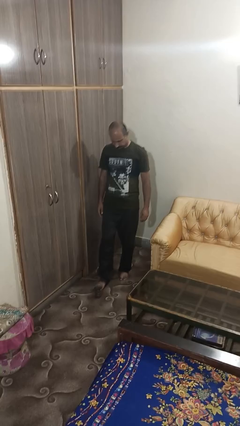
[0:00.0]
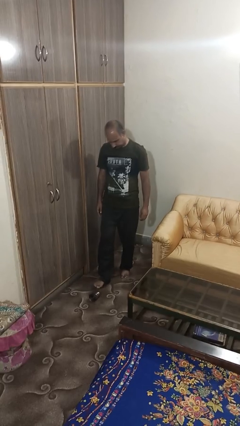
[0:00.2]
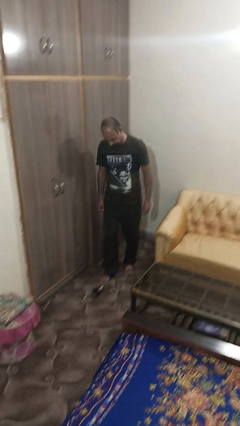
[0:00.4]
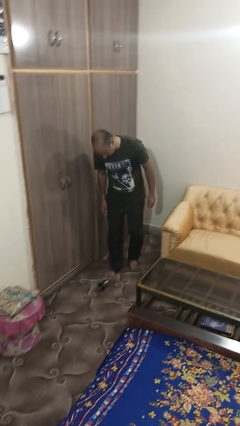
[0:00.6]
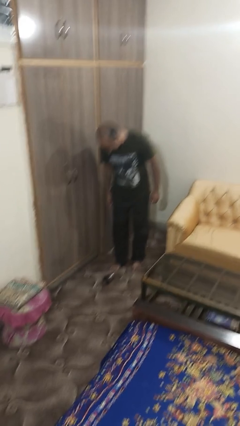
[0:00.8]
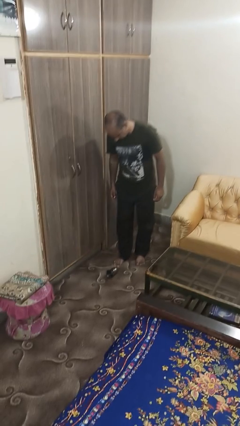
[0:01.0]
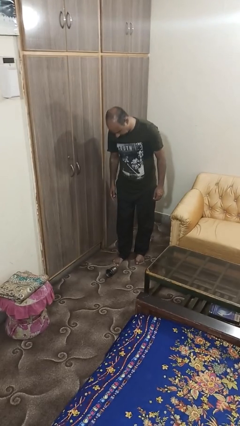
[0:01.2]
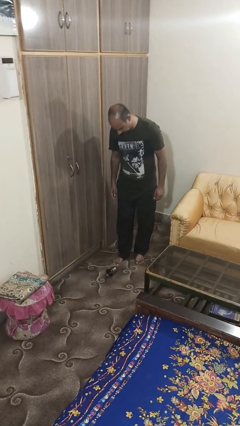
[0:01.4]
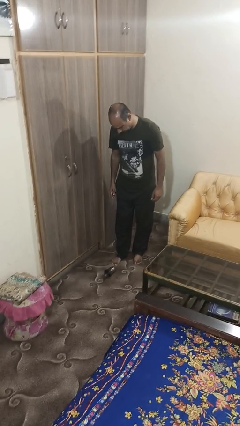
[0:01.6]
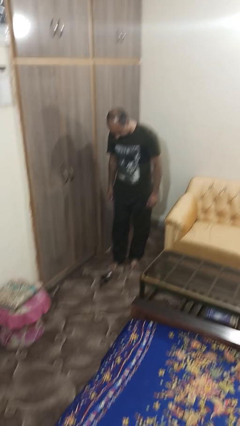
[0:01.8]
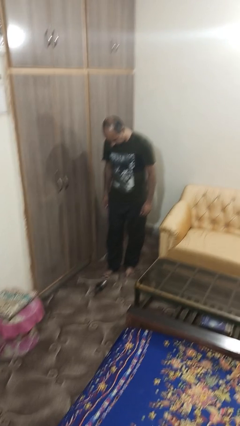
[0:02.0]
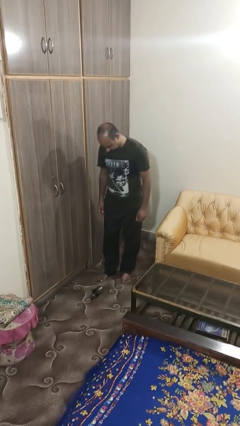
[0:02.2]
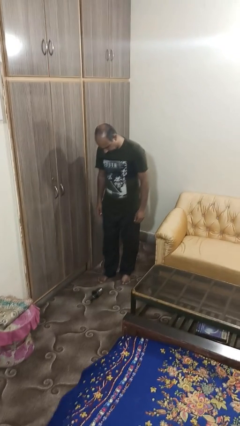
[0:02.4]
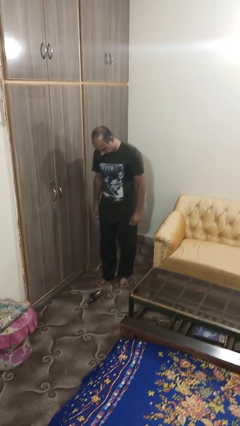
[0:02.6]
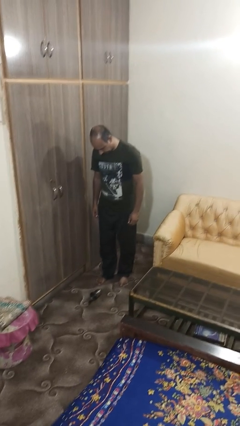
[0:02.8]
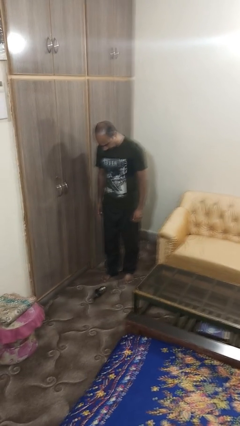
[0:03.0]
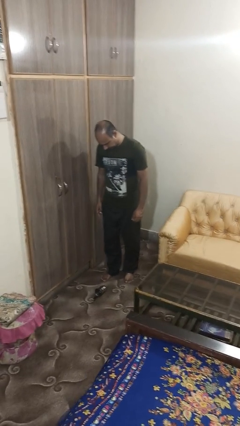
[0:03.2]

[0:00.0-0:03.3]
person spills on floor

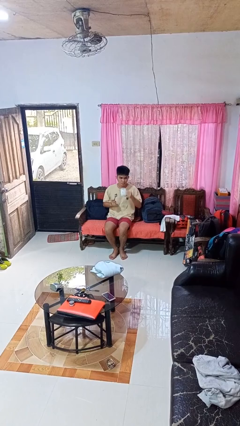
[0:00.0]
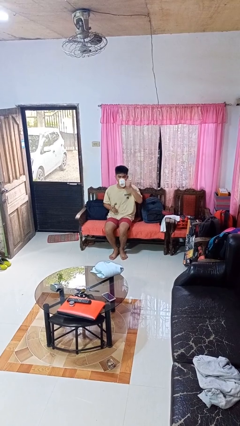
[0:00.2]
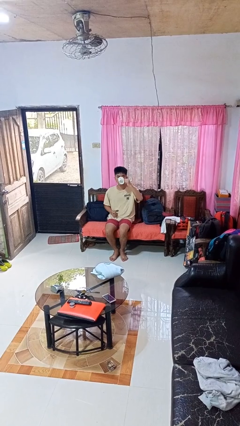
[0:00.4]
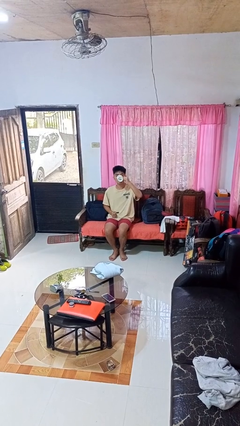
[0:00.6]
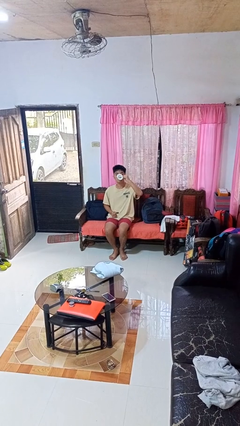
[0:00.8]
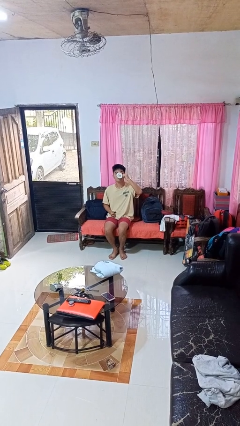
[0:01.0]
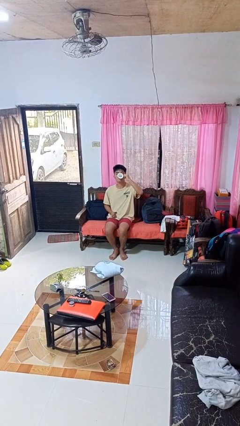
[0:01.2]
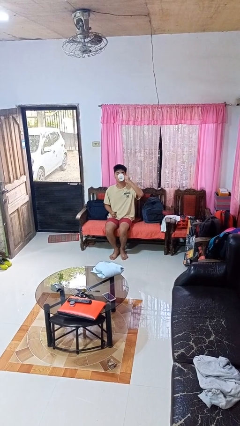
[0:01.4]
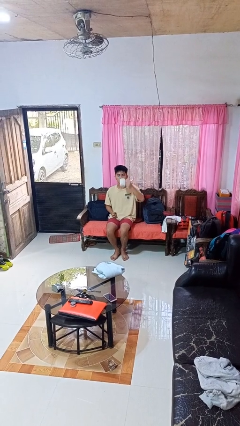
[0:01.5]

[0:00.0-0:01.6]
person drinks from mug

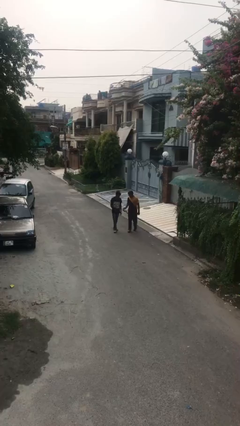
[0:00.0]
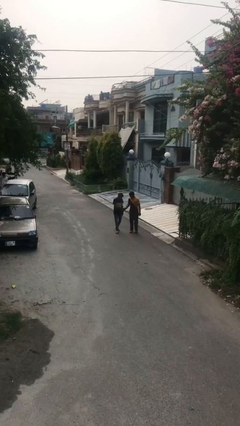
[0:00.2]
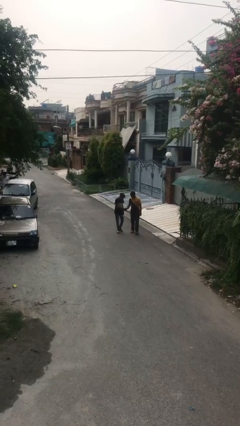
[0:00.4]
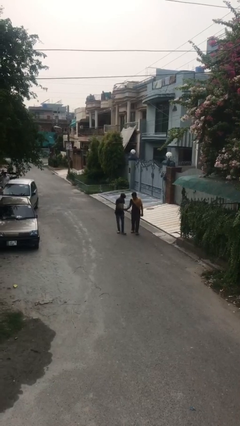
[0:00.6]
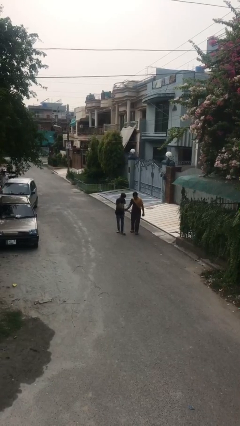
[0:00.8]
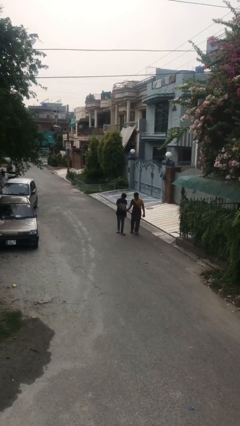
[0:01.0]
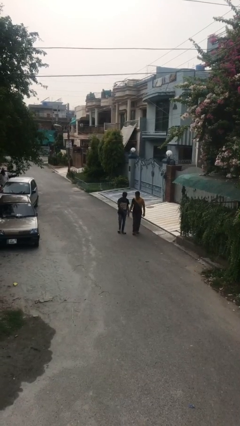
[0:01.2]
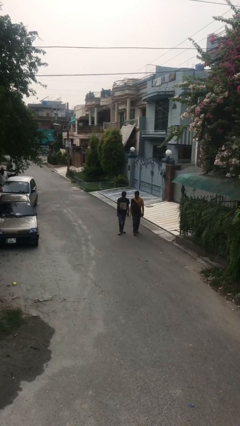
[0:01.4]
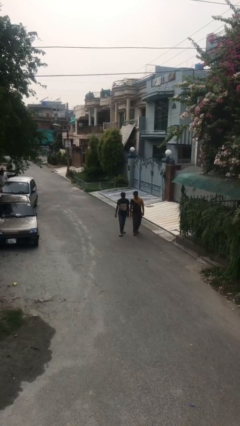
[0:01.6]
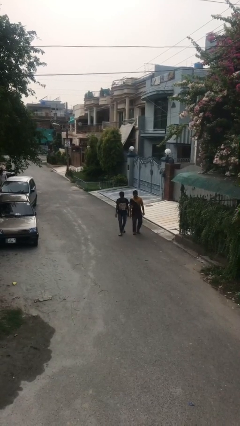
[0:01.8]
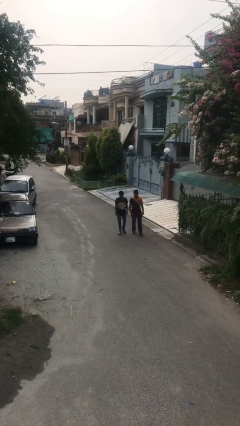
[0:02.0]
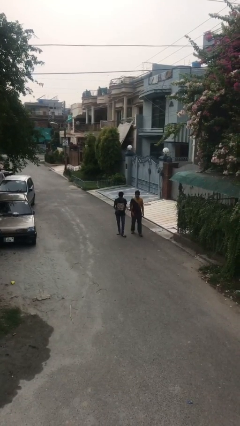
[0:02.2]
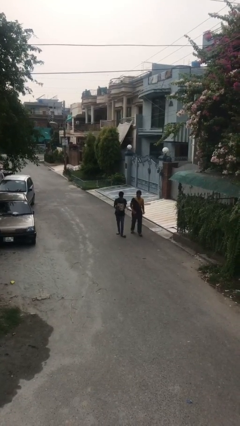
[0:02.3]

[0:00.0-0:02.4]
person shakes hand

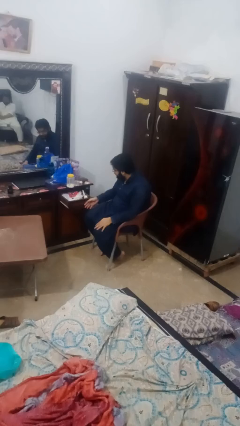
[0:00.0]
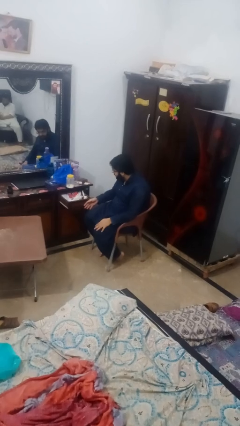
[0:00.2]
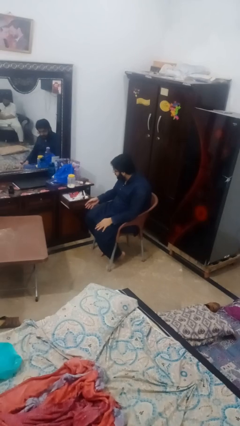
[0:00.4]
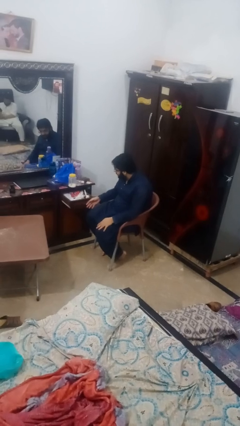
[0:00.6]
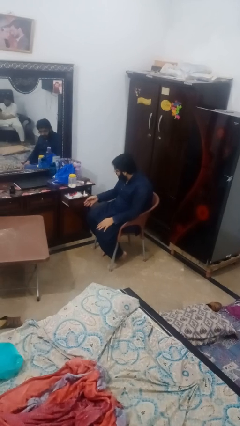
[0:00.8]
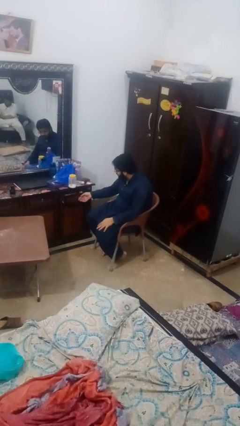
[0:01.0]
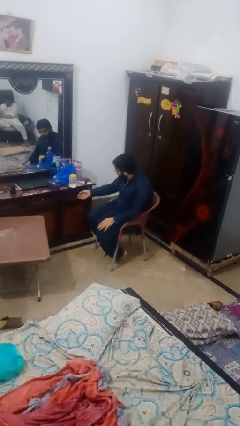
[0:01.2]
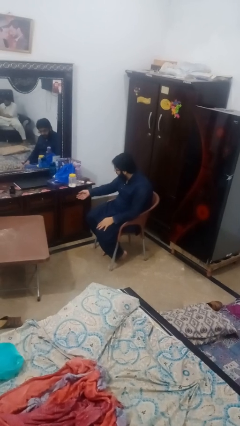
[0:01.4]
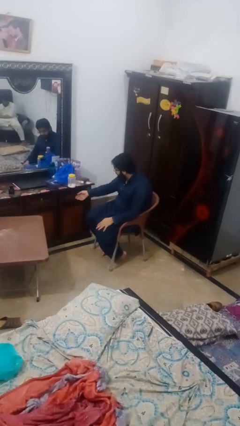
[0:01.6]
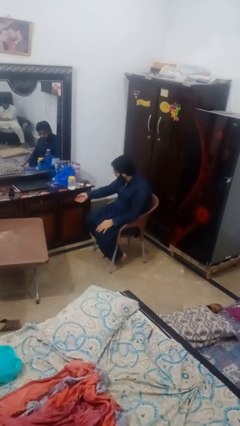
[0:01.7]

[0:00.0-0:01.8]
person closes dresser drawer

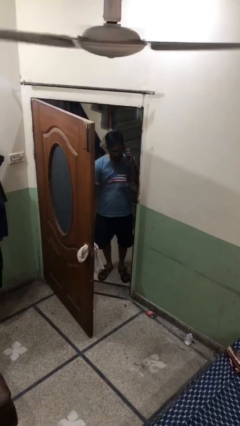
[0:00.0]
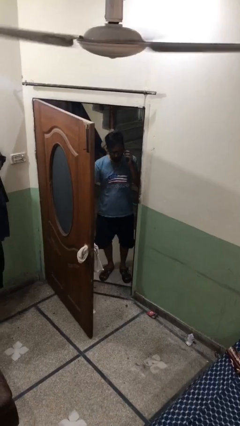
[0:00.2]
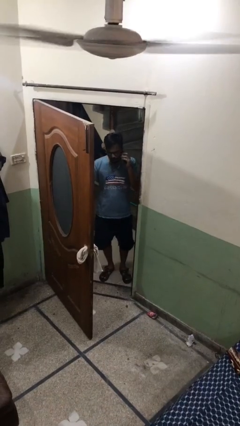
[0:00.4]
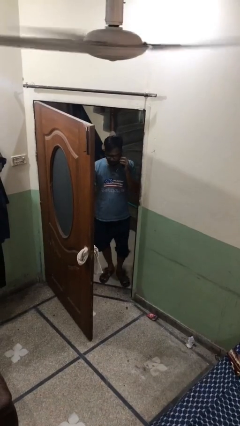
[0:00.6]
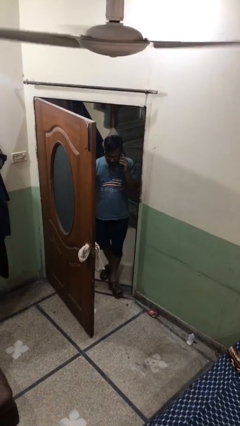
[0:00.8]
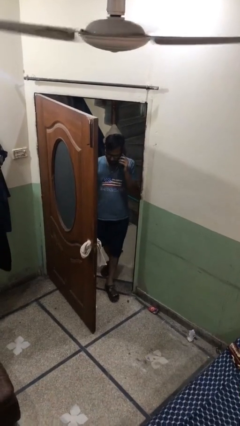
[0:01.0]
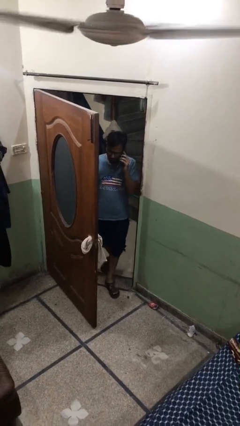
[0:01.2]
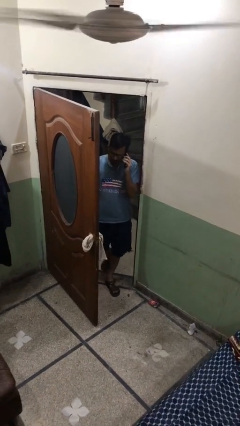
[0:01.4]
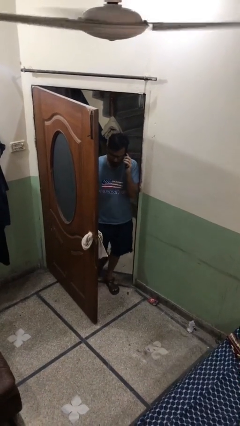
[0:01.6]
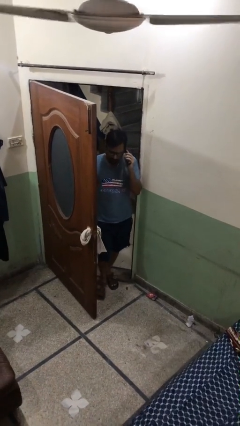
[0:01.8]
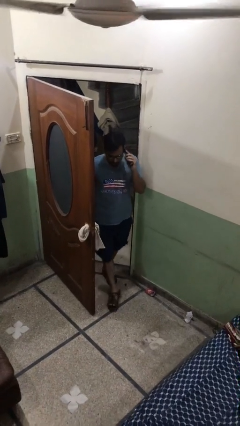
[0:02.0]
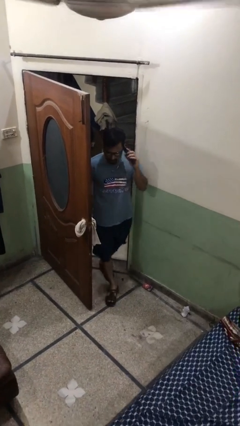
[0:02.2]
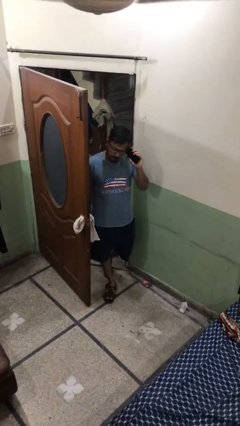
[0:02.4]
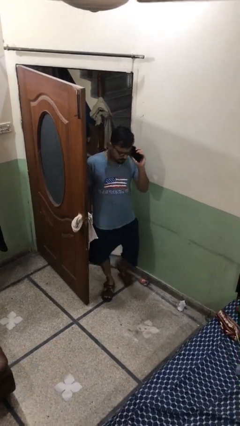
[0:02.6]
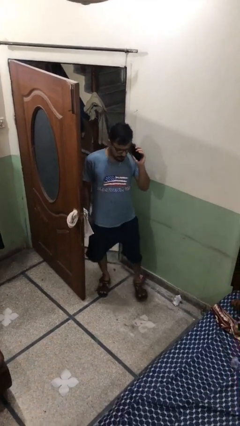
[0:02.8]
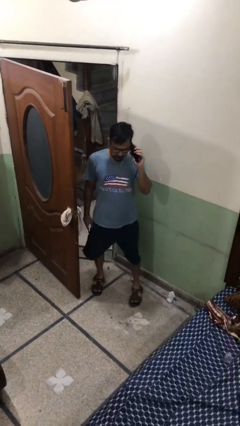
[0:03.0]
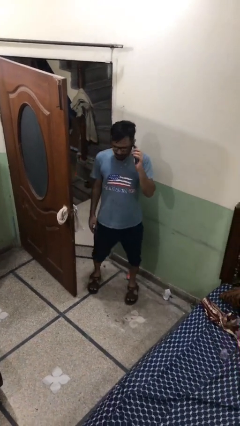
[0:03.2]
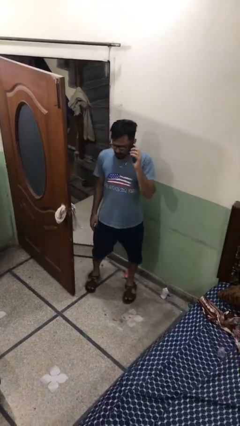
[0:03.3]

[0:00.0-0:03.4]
person enters scene through structure

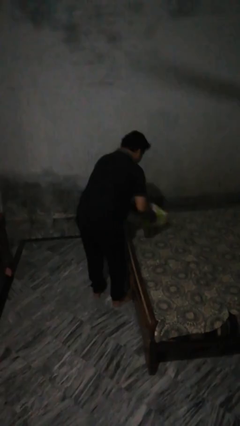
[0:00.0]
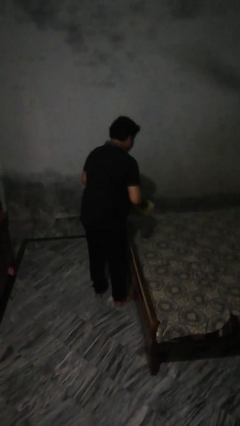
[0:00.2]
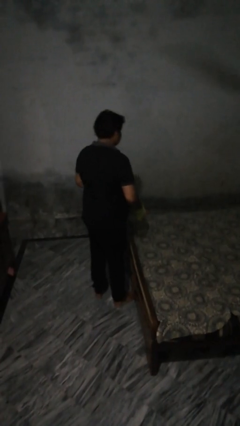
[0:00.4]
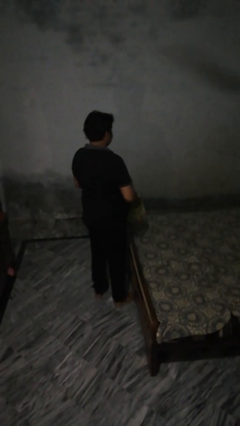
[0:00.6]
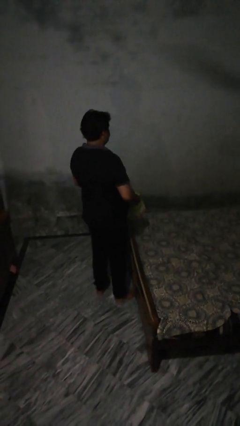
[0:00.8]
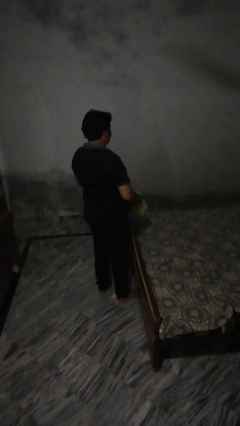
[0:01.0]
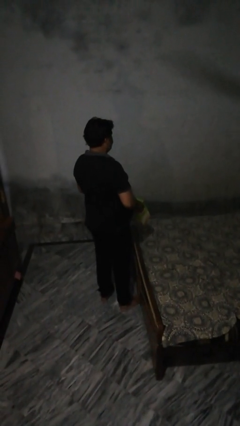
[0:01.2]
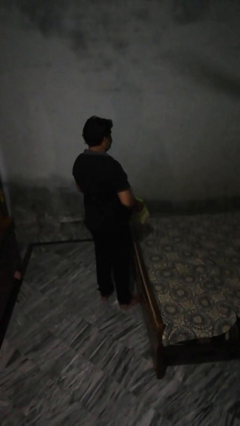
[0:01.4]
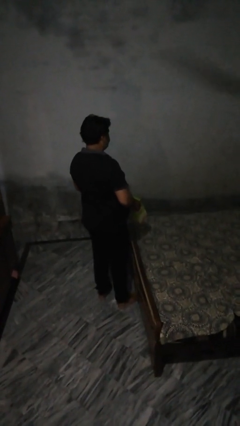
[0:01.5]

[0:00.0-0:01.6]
person picks up object from bed

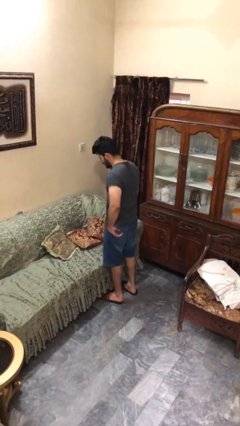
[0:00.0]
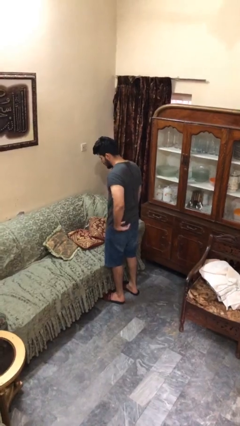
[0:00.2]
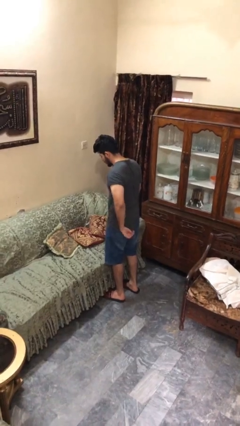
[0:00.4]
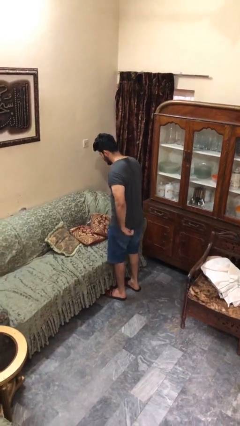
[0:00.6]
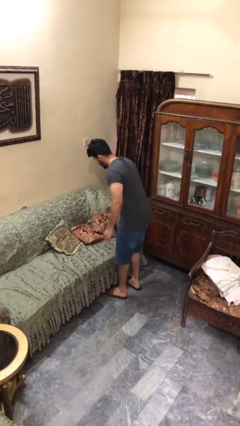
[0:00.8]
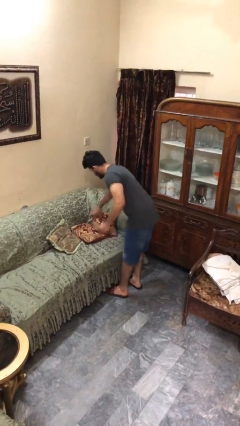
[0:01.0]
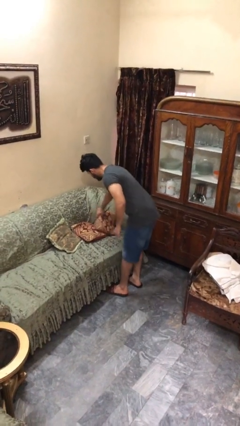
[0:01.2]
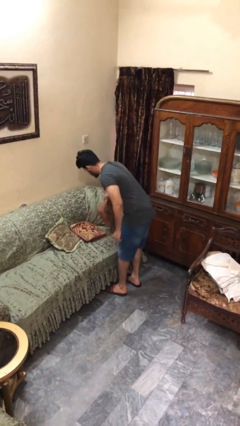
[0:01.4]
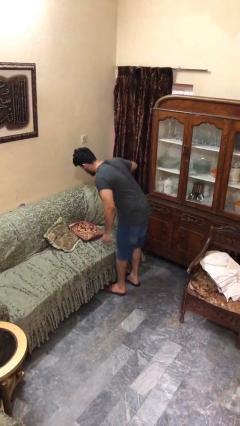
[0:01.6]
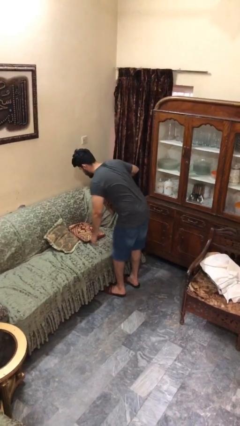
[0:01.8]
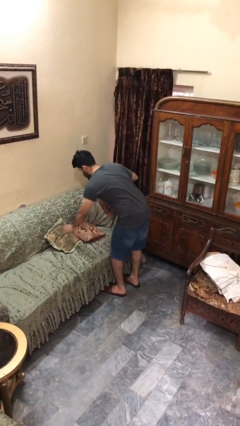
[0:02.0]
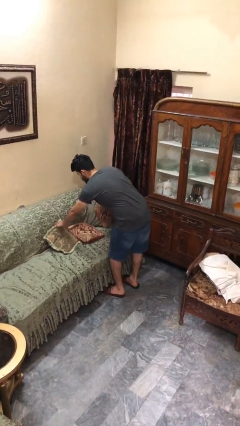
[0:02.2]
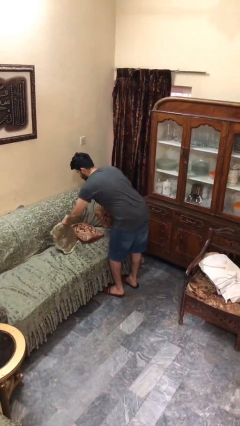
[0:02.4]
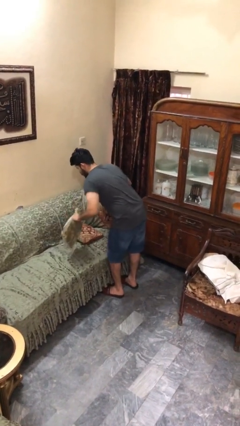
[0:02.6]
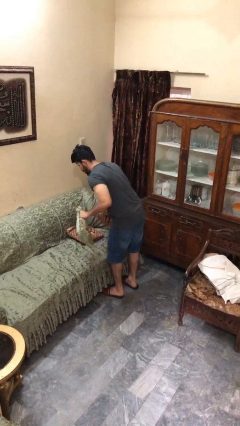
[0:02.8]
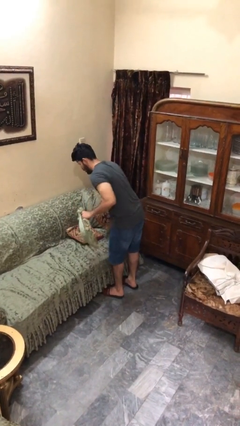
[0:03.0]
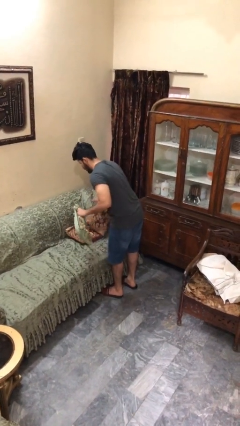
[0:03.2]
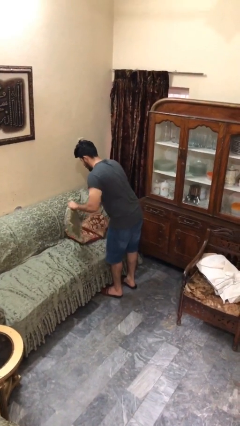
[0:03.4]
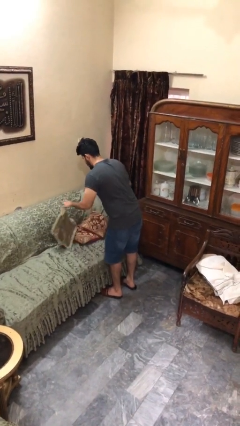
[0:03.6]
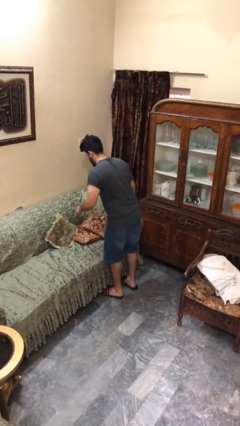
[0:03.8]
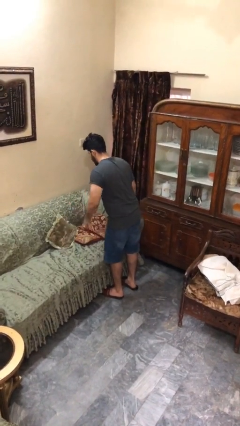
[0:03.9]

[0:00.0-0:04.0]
person searches in couch
